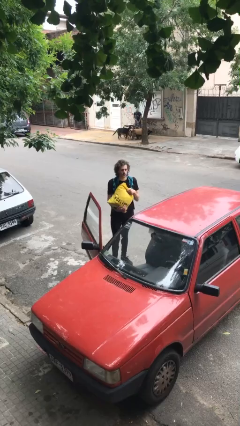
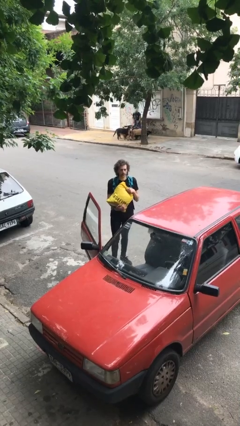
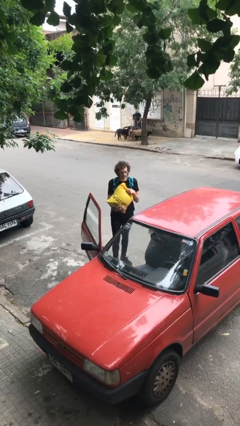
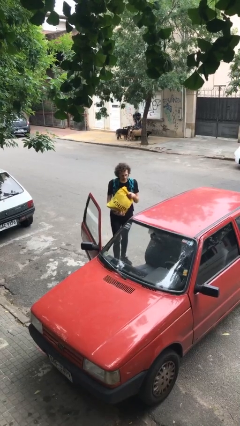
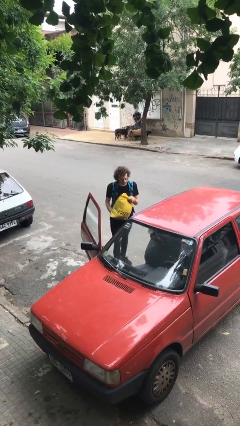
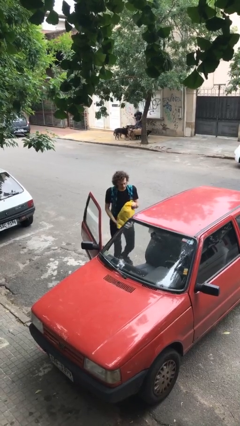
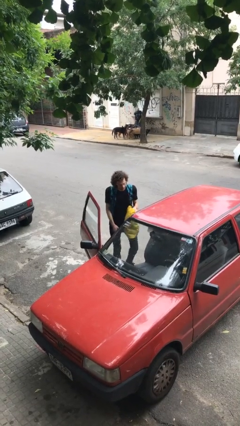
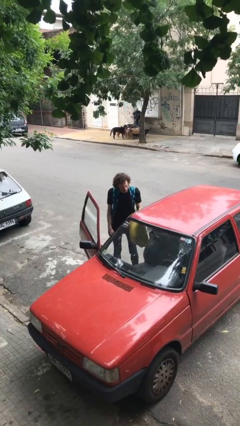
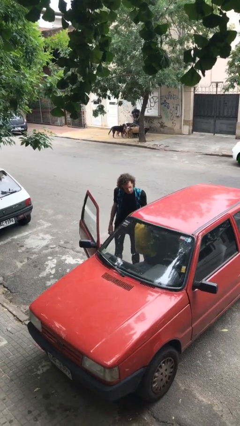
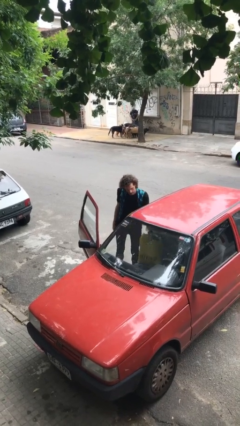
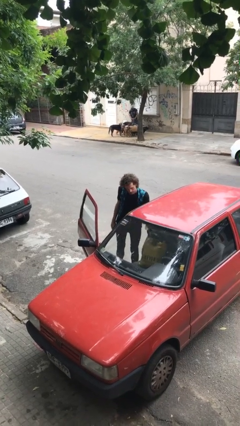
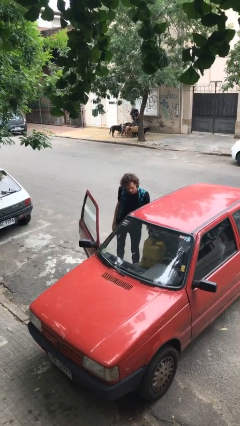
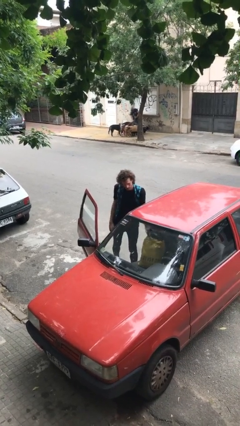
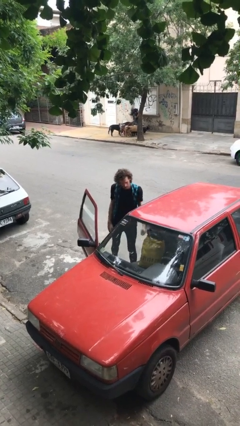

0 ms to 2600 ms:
person loads car

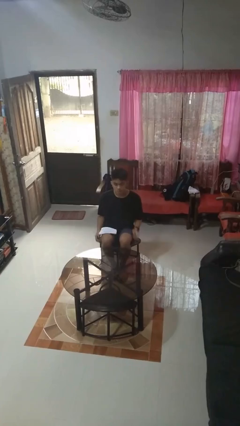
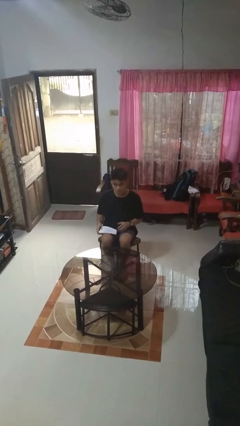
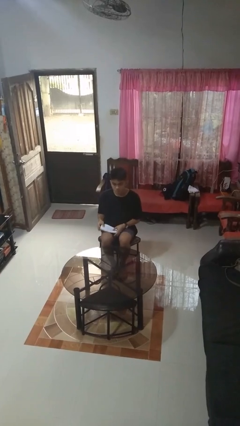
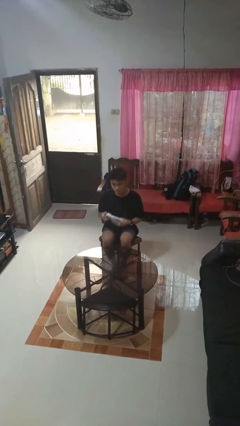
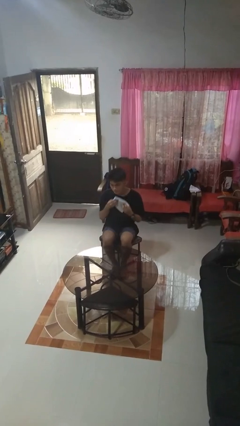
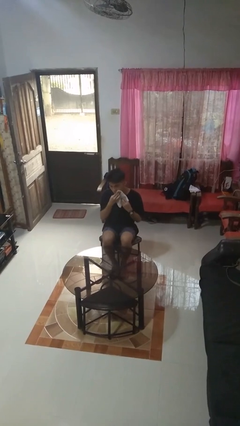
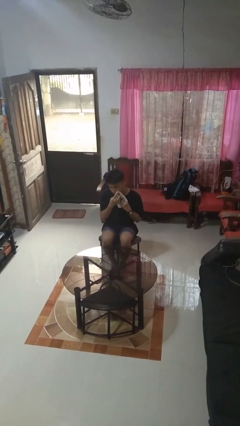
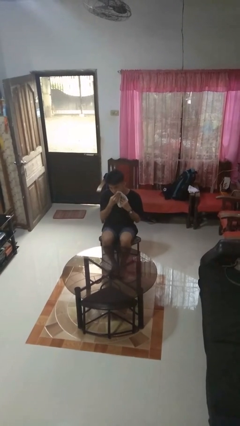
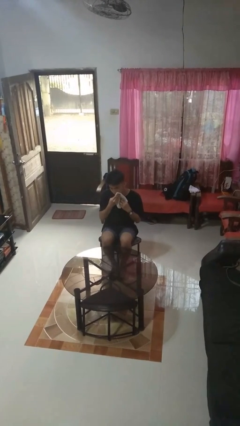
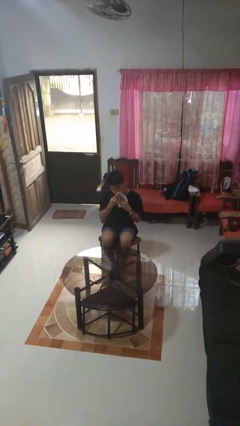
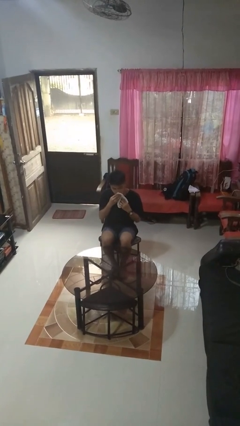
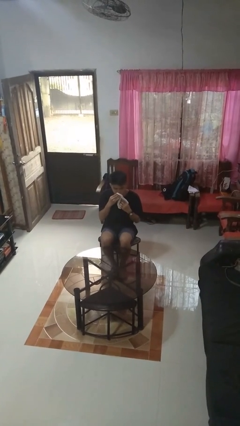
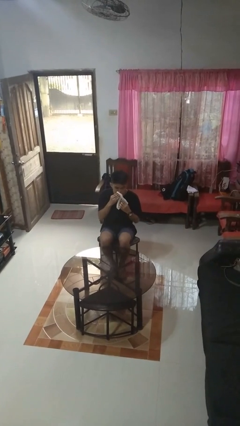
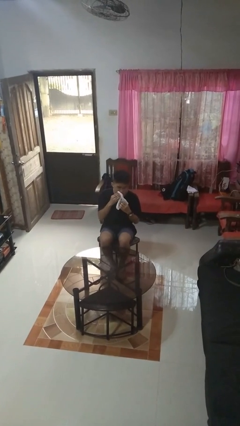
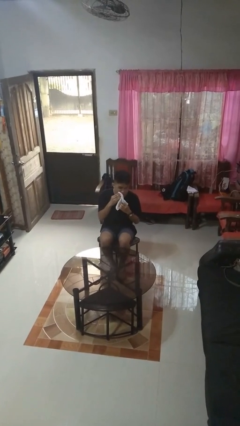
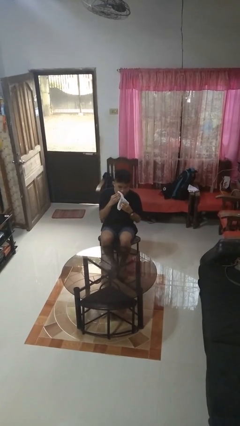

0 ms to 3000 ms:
person wipes mouth with napkin

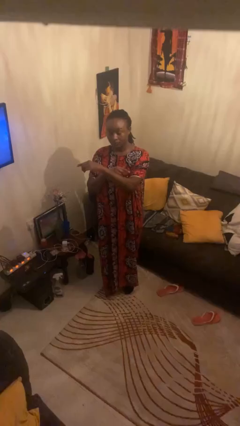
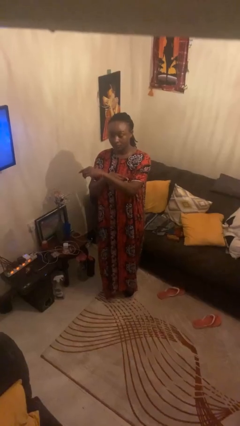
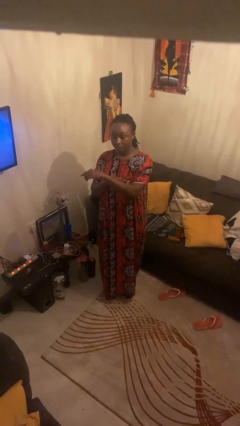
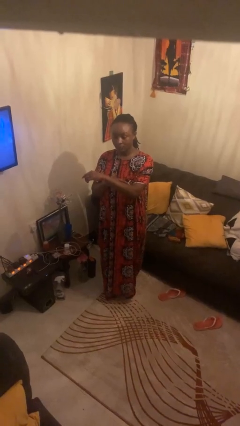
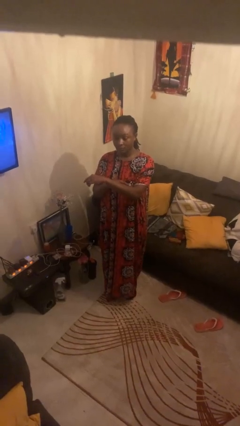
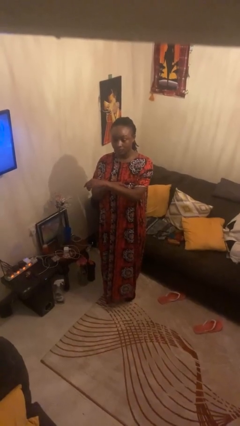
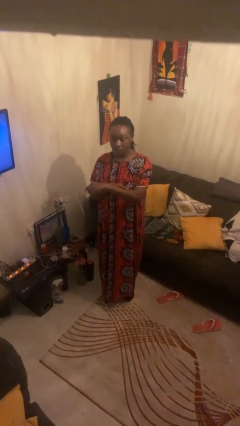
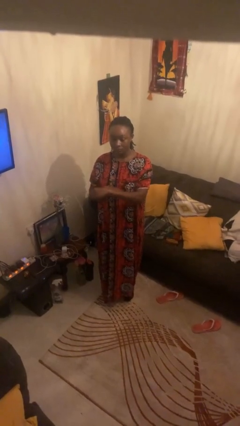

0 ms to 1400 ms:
person gestures swipe right

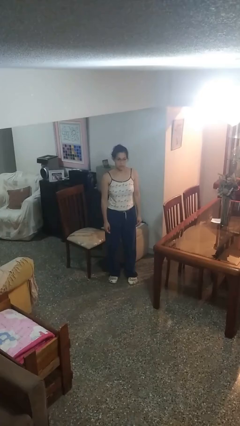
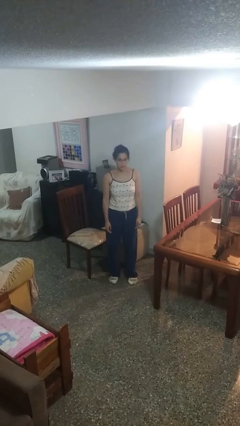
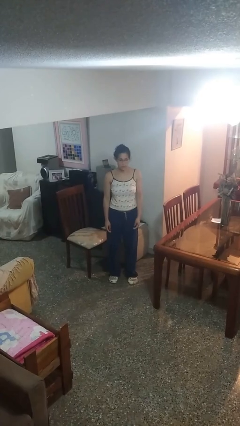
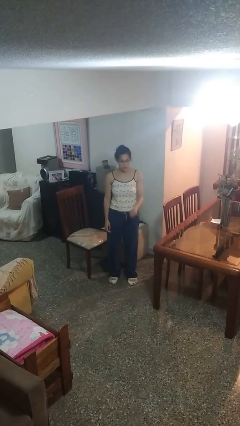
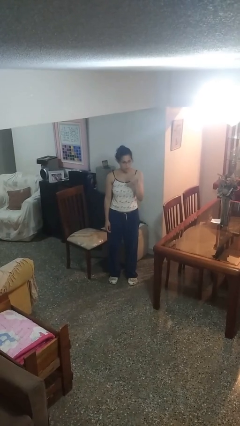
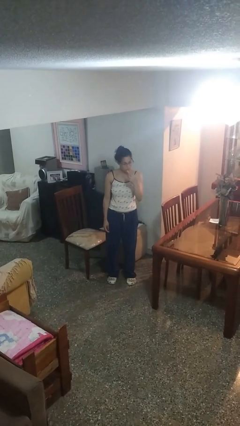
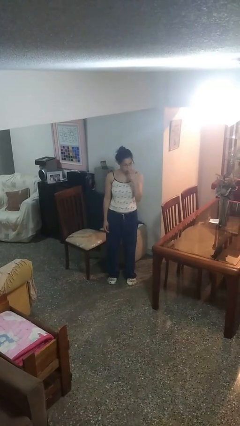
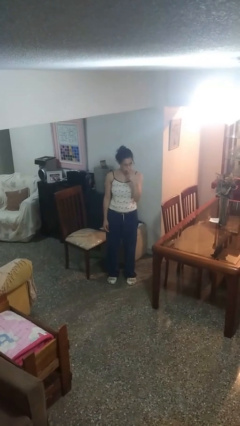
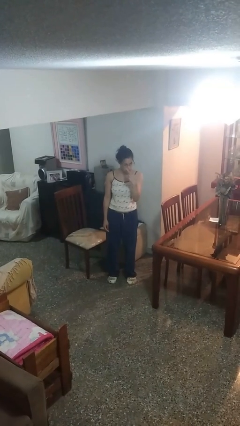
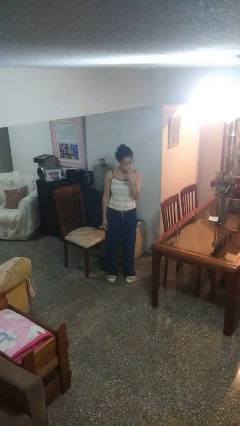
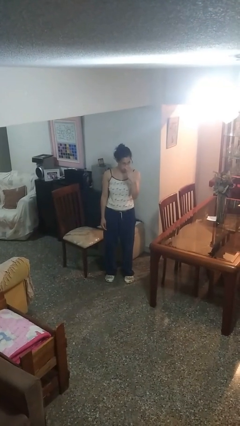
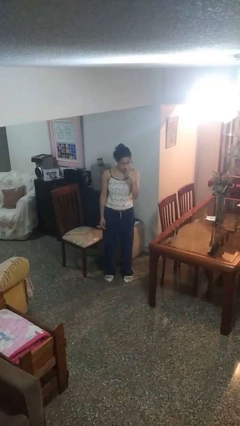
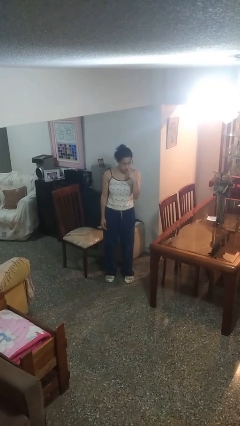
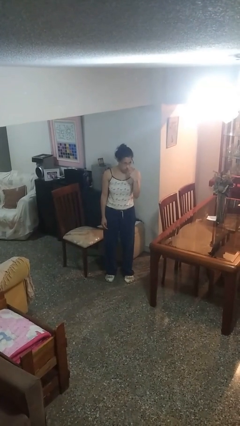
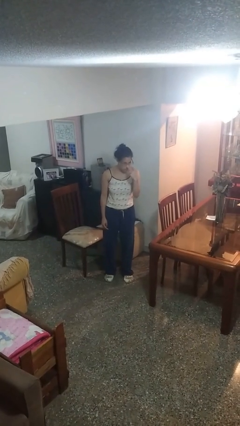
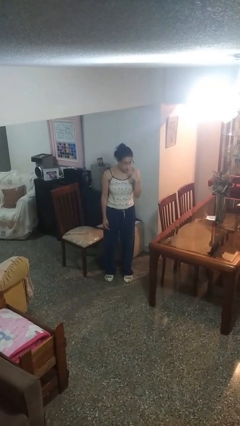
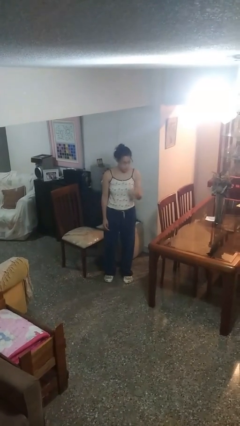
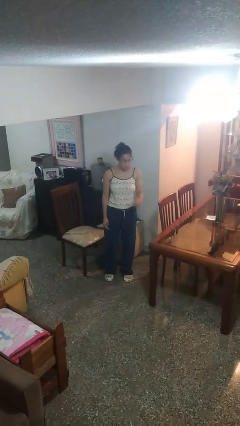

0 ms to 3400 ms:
person gestures watch closely

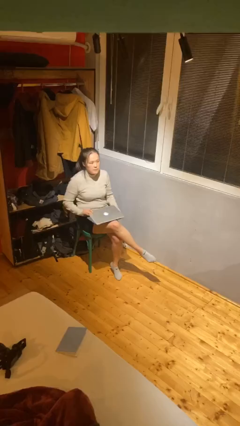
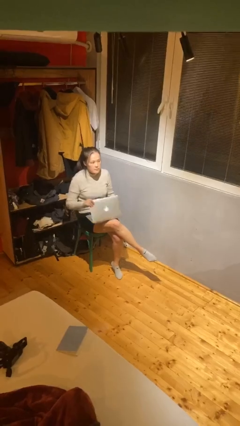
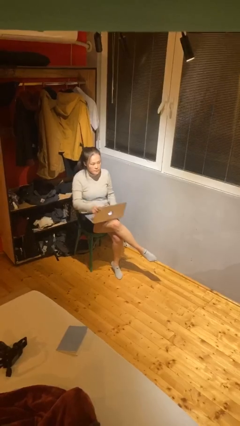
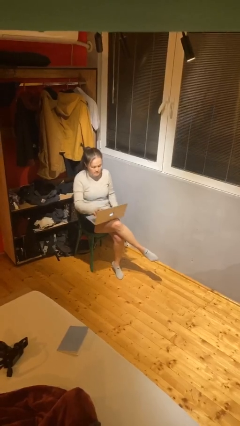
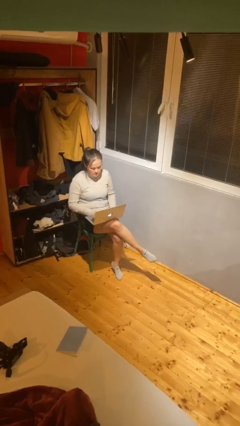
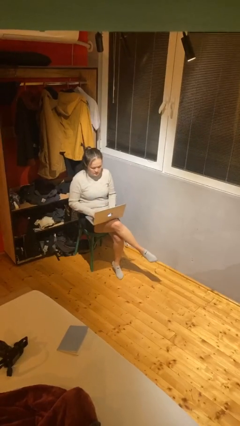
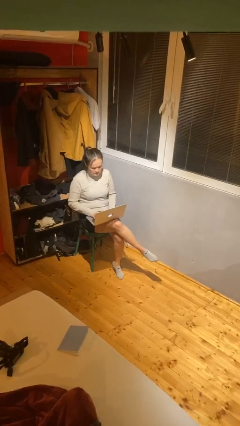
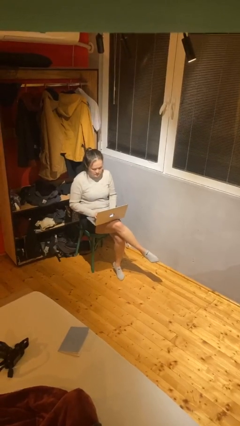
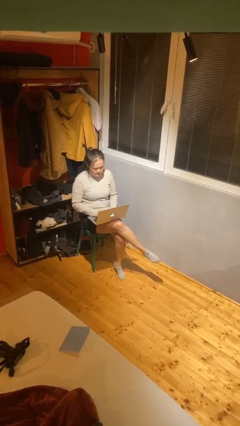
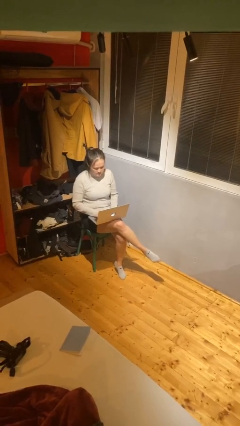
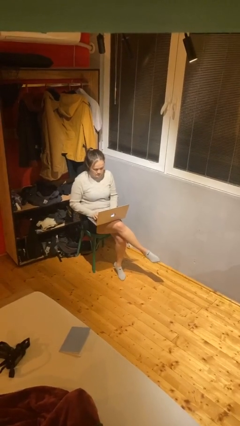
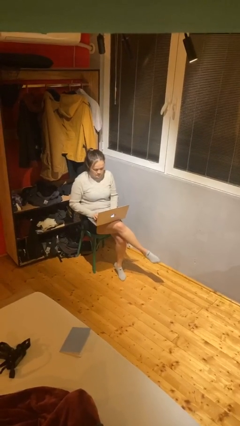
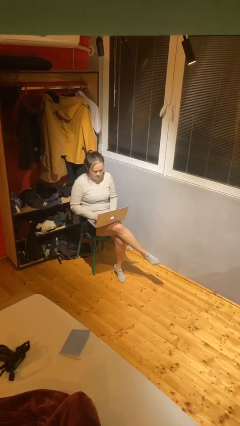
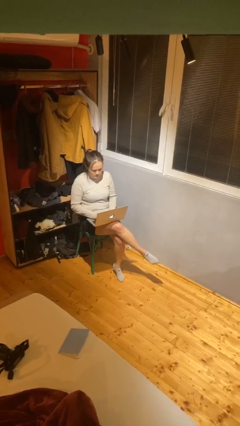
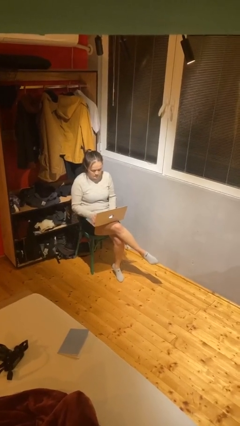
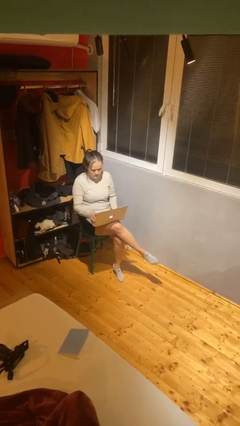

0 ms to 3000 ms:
person interacts with laptop

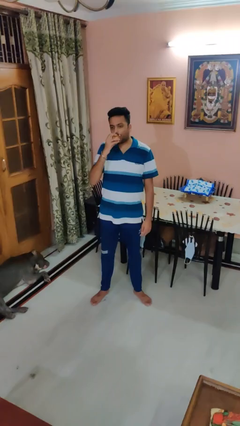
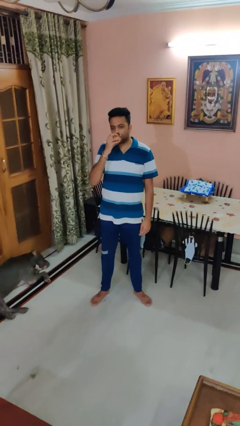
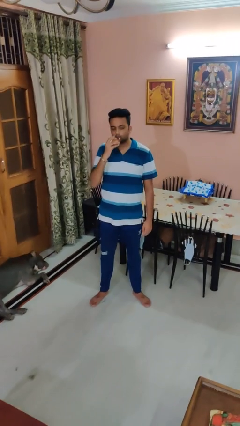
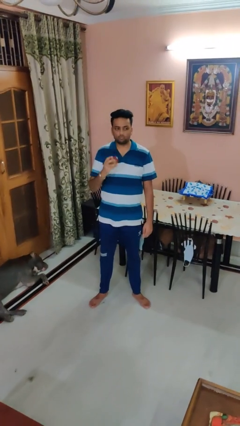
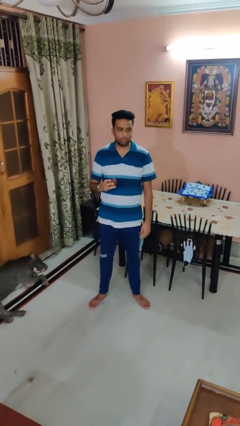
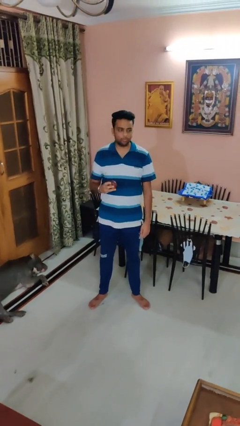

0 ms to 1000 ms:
person eats apple

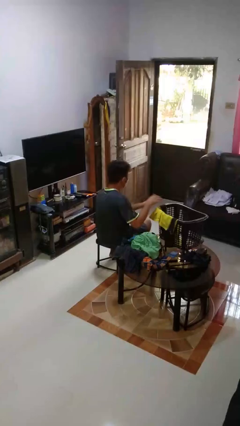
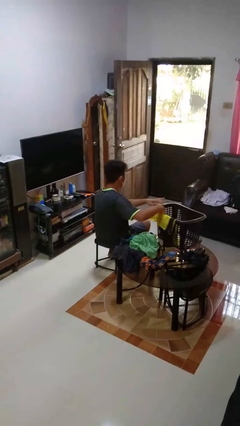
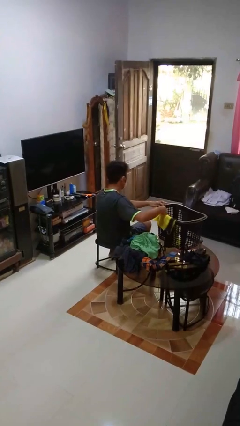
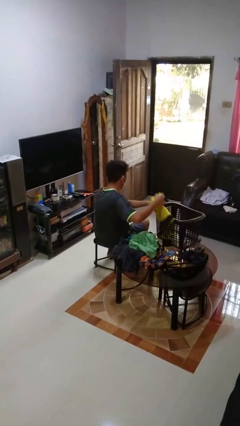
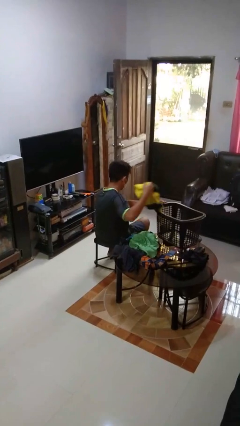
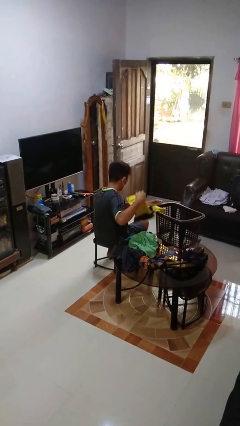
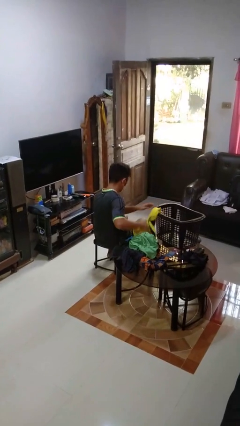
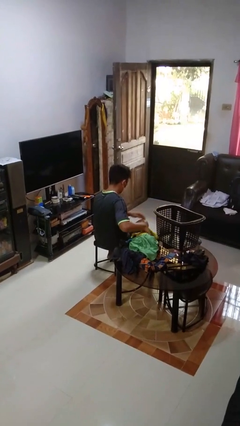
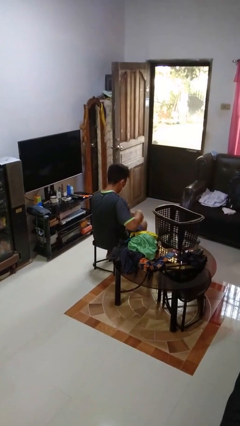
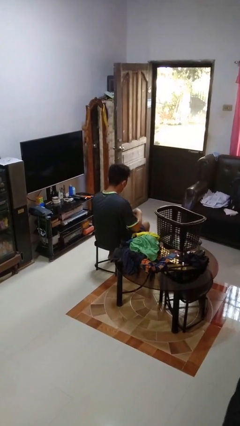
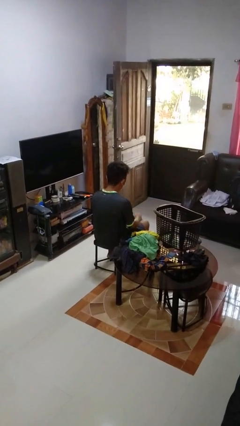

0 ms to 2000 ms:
person takes object from basket

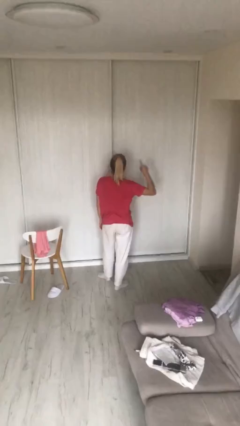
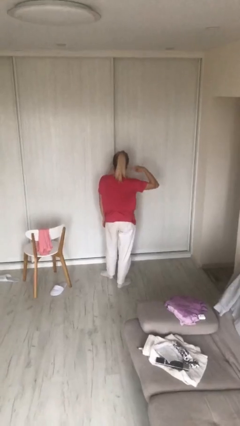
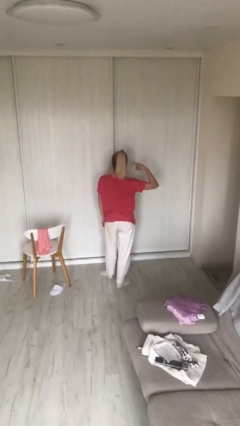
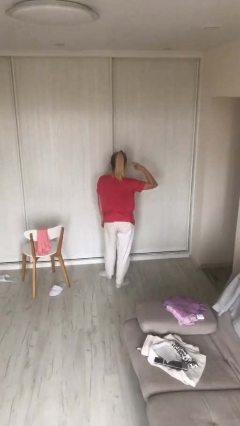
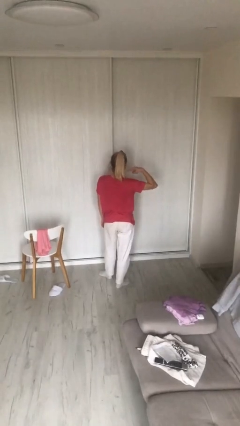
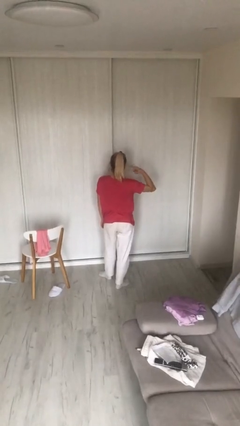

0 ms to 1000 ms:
person gestures listen closely
